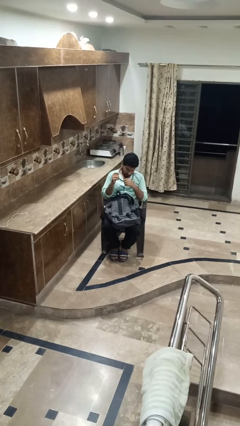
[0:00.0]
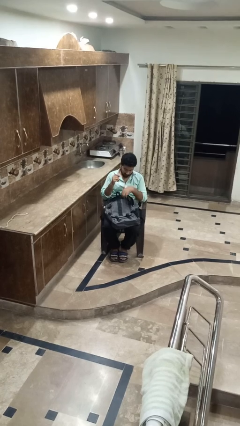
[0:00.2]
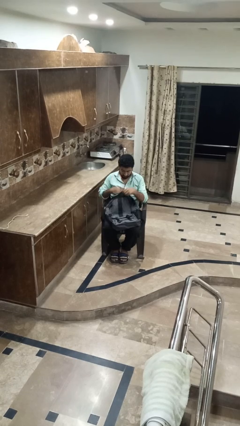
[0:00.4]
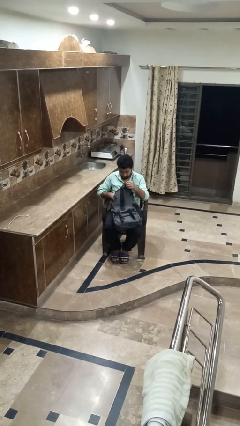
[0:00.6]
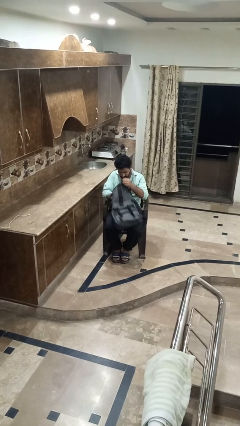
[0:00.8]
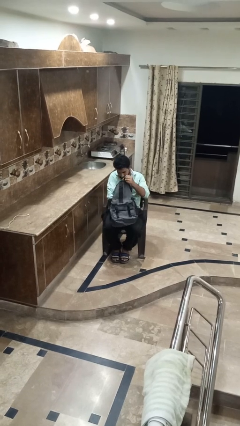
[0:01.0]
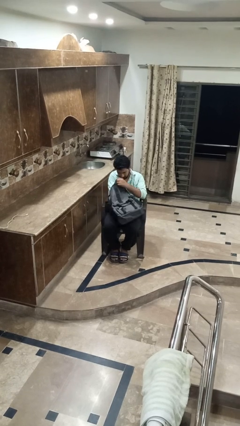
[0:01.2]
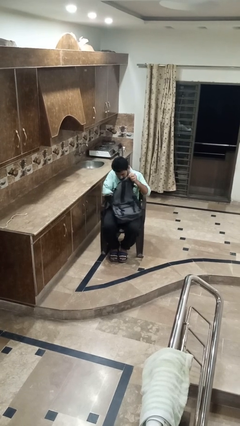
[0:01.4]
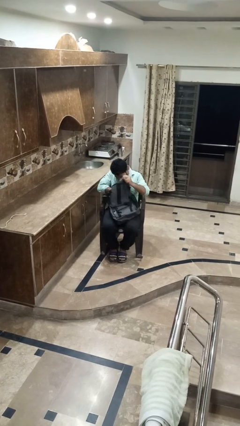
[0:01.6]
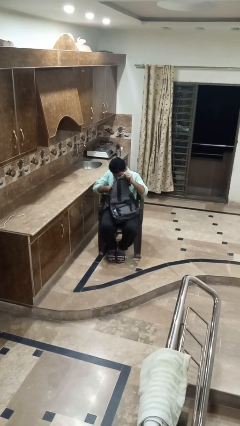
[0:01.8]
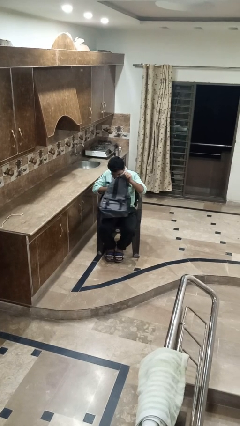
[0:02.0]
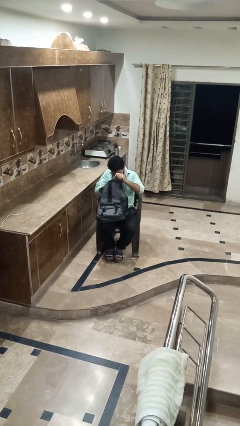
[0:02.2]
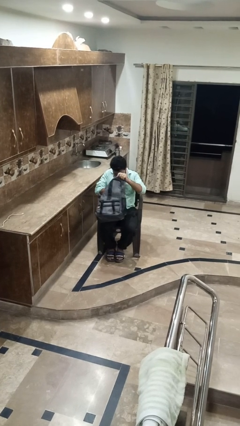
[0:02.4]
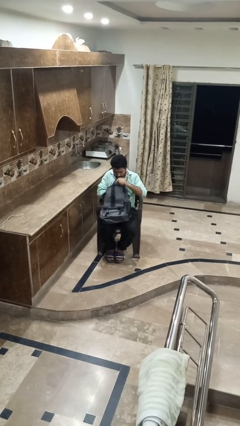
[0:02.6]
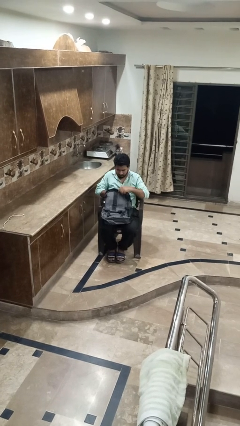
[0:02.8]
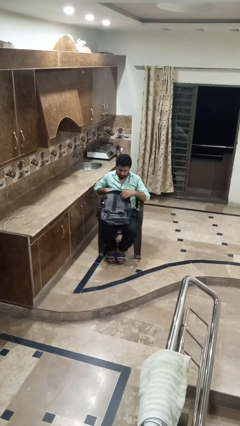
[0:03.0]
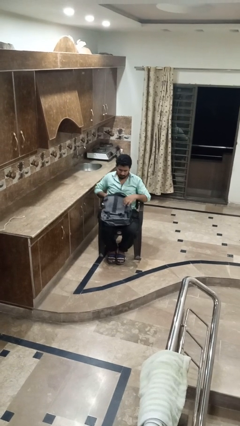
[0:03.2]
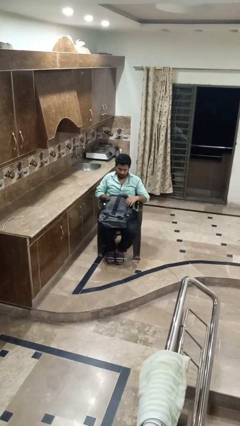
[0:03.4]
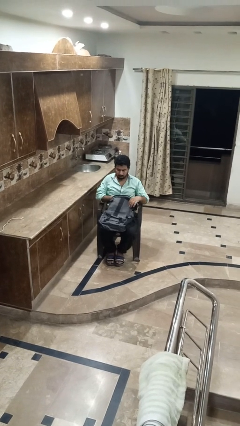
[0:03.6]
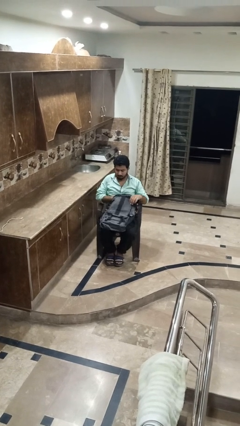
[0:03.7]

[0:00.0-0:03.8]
person searches in bag

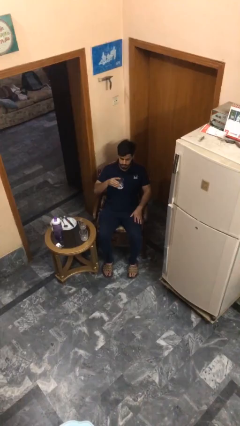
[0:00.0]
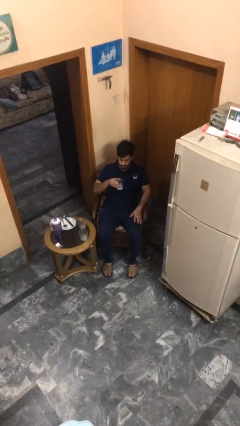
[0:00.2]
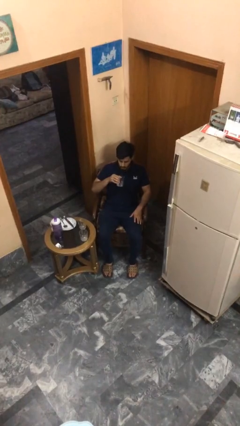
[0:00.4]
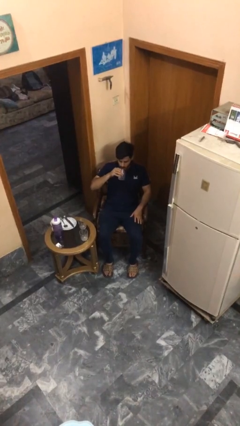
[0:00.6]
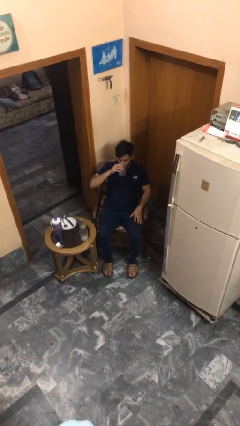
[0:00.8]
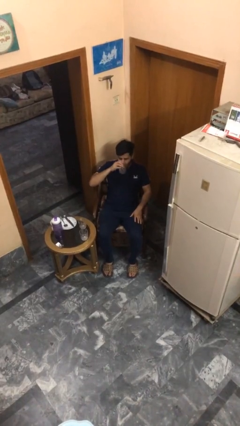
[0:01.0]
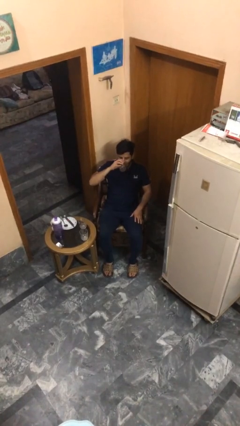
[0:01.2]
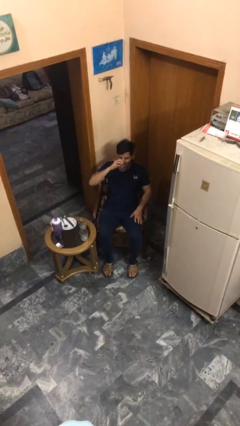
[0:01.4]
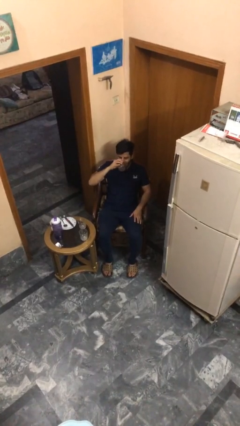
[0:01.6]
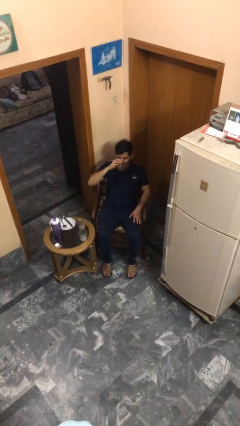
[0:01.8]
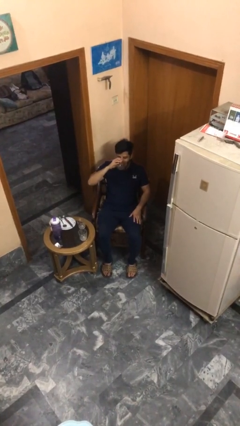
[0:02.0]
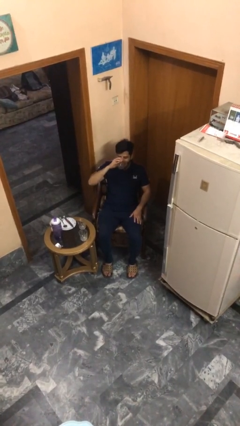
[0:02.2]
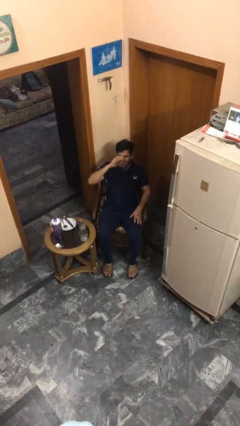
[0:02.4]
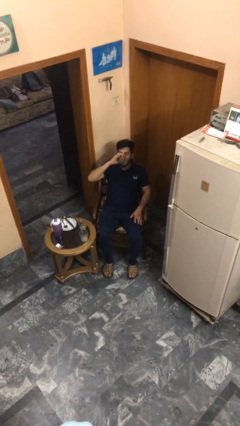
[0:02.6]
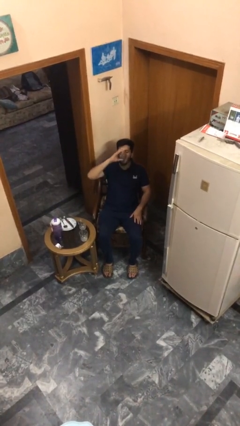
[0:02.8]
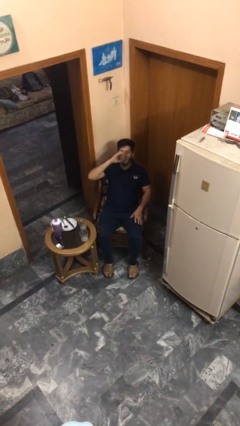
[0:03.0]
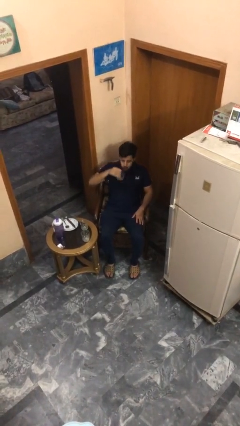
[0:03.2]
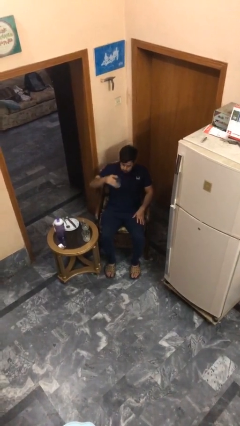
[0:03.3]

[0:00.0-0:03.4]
person drinks from shotglass

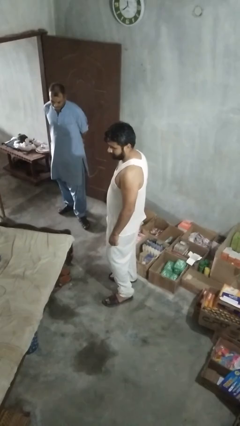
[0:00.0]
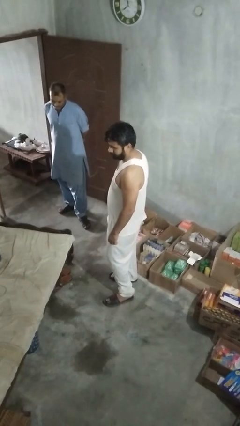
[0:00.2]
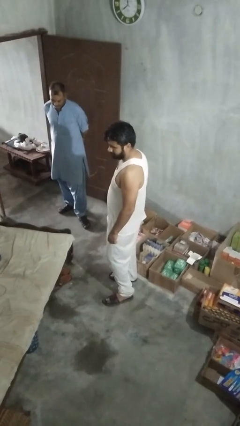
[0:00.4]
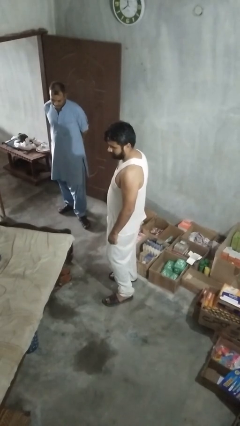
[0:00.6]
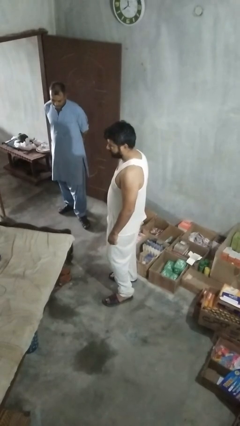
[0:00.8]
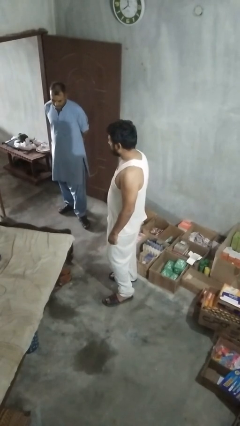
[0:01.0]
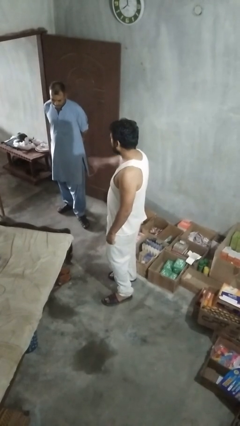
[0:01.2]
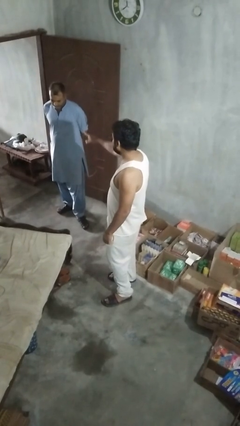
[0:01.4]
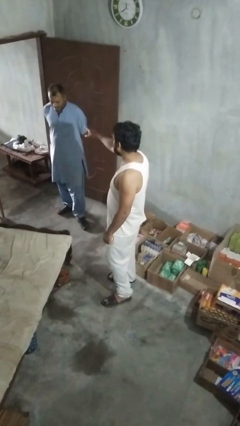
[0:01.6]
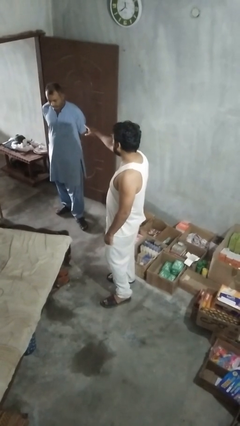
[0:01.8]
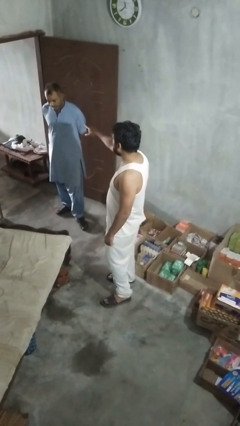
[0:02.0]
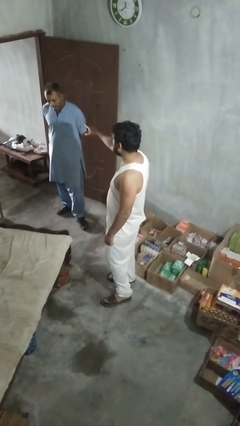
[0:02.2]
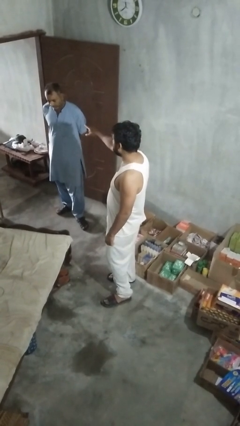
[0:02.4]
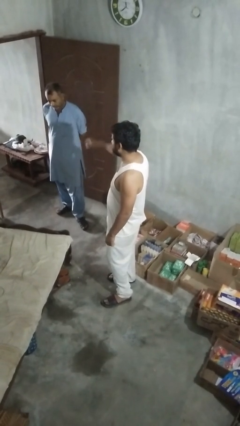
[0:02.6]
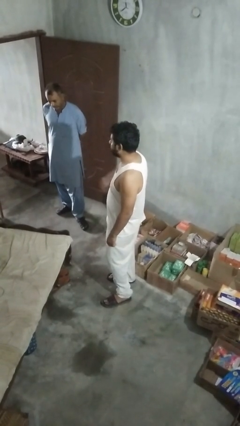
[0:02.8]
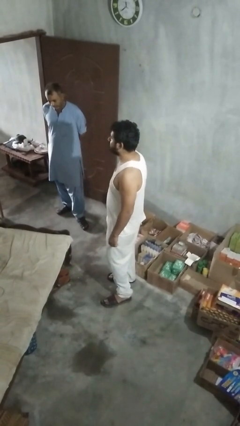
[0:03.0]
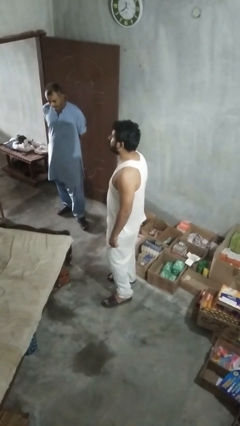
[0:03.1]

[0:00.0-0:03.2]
person points at person

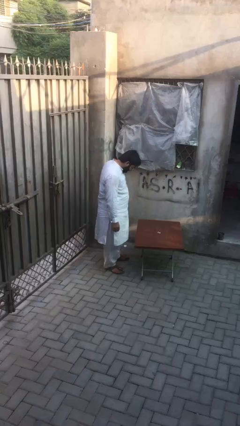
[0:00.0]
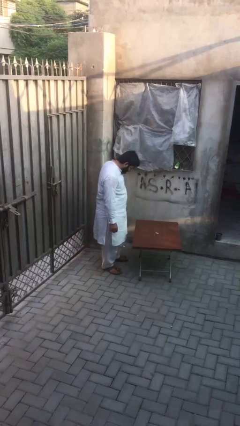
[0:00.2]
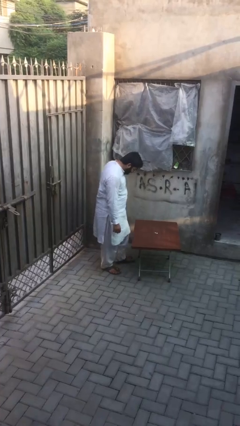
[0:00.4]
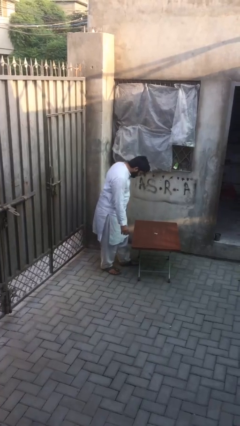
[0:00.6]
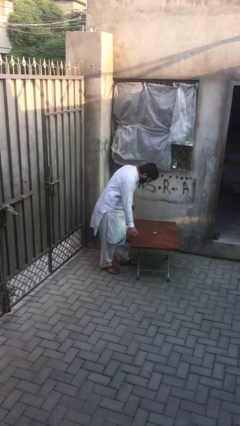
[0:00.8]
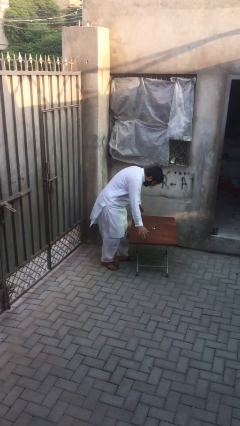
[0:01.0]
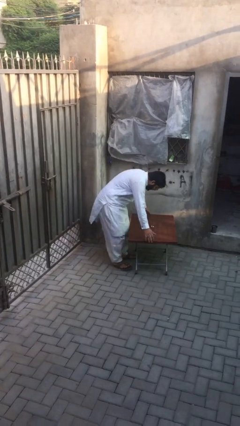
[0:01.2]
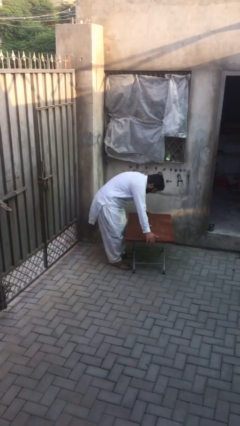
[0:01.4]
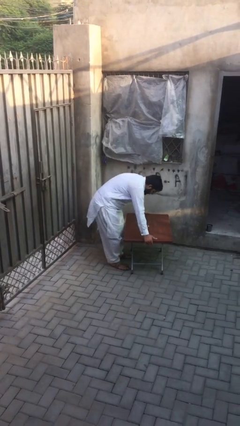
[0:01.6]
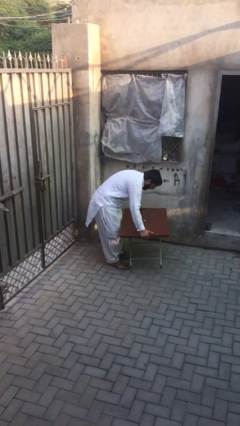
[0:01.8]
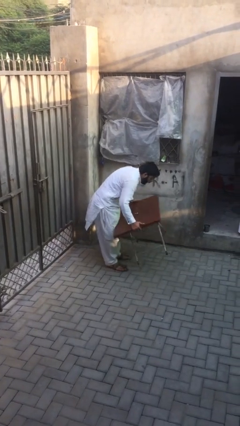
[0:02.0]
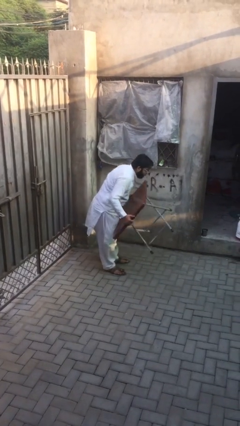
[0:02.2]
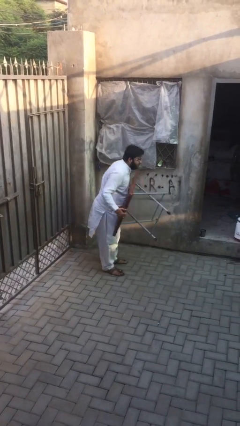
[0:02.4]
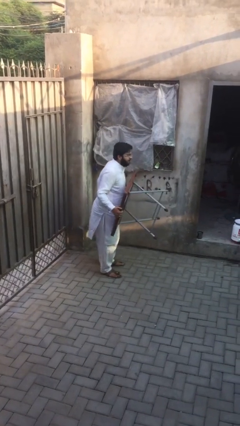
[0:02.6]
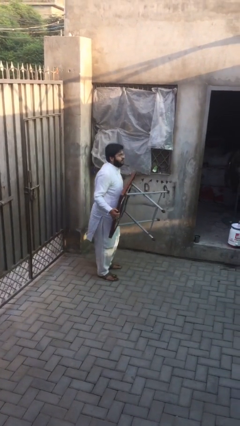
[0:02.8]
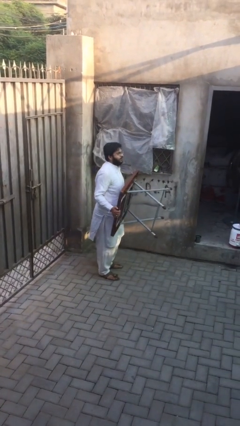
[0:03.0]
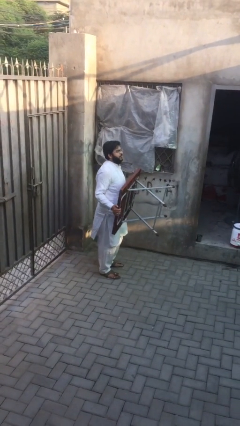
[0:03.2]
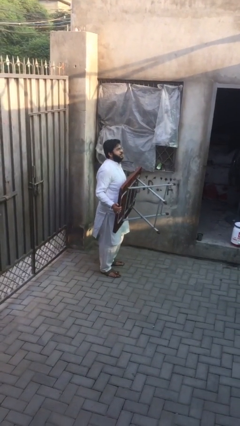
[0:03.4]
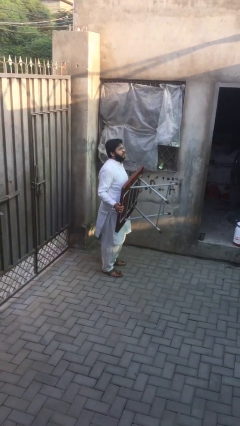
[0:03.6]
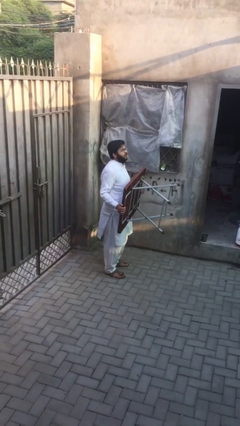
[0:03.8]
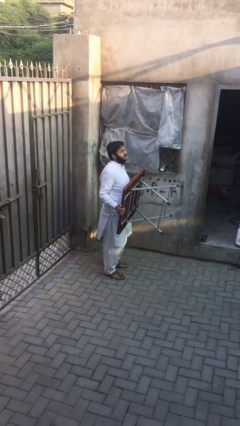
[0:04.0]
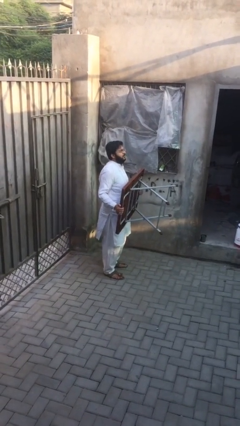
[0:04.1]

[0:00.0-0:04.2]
person picks up object from floor

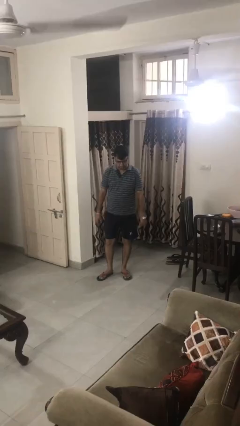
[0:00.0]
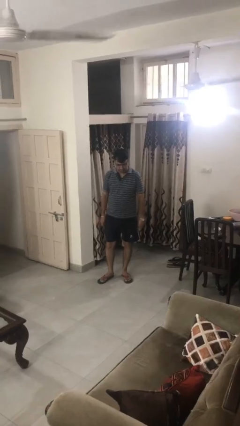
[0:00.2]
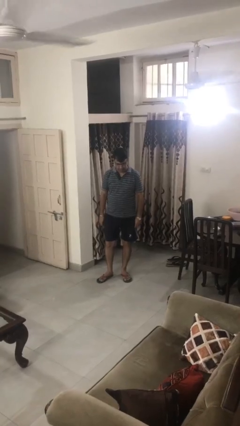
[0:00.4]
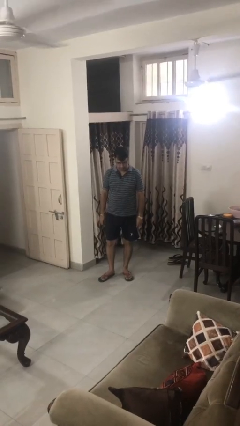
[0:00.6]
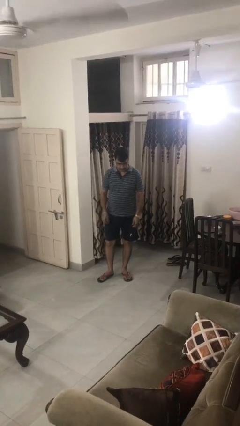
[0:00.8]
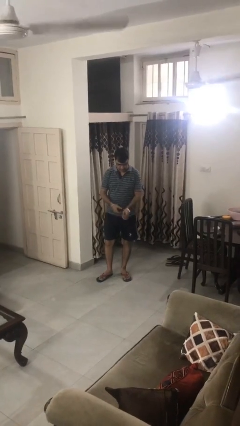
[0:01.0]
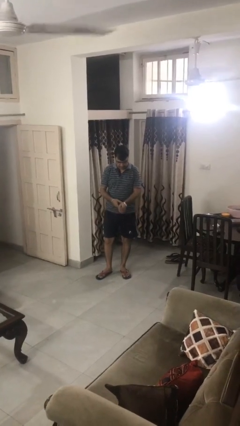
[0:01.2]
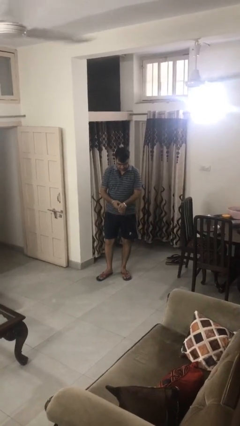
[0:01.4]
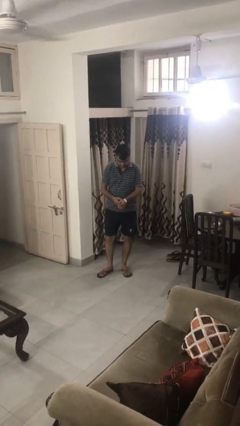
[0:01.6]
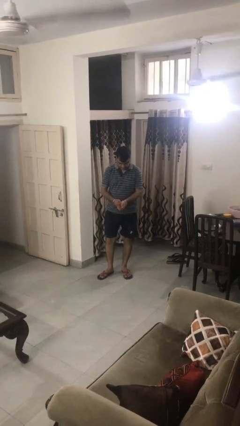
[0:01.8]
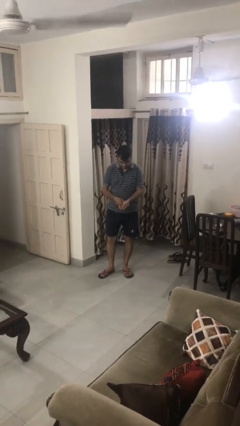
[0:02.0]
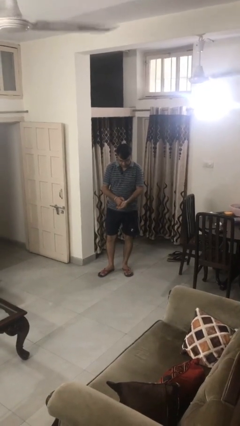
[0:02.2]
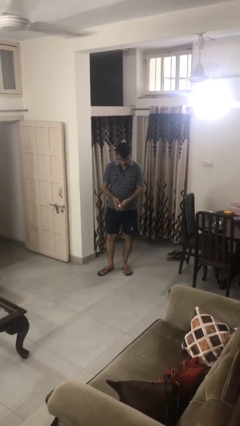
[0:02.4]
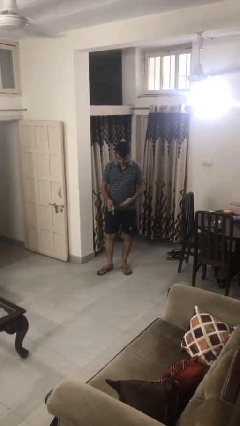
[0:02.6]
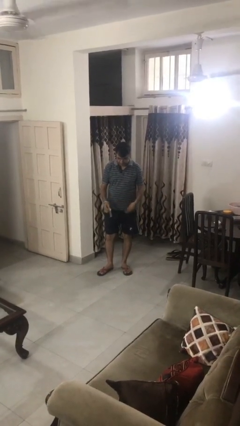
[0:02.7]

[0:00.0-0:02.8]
person takes off wristwatch

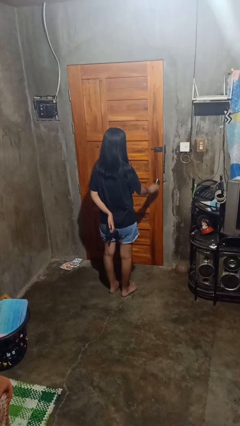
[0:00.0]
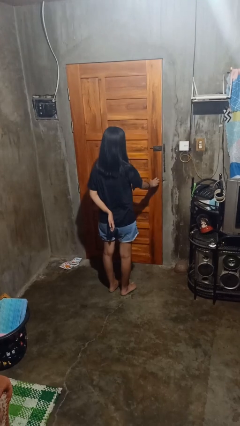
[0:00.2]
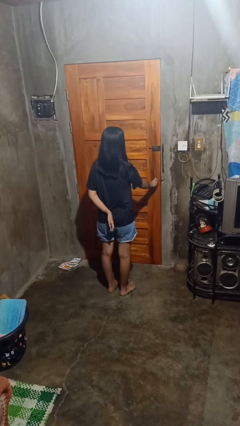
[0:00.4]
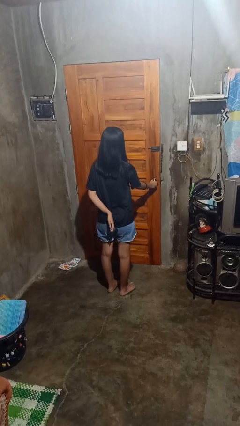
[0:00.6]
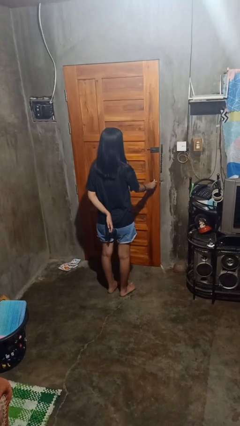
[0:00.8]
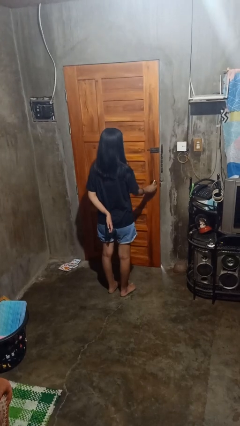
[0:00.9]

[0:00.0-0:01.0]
person opens facility door
